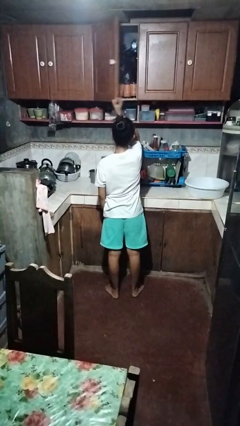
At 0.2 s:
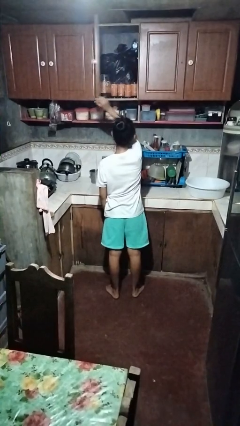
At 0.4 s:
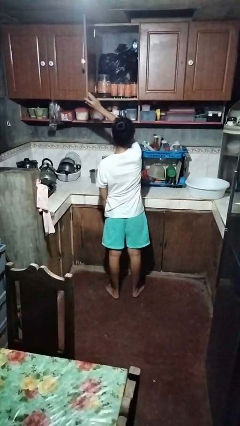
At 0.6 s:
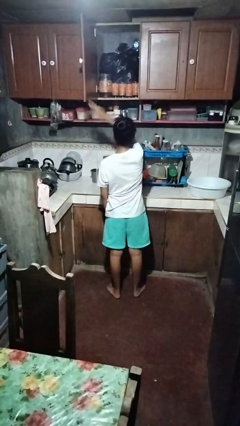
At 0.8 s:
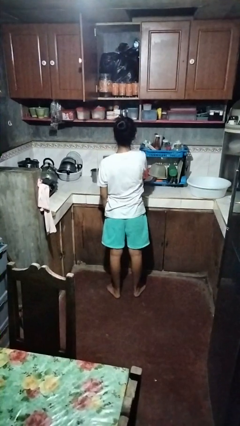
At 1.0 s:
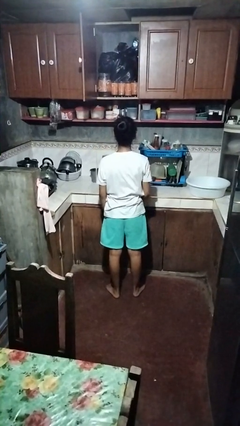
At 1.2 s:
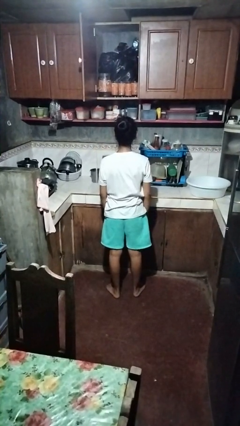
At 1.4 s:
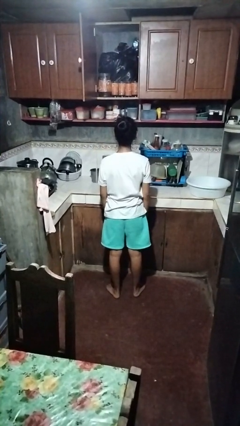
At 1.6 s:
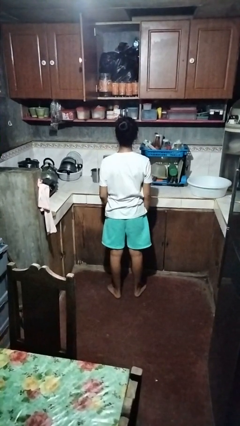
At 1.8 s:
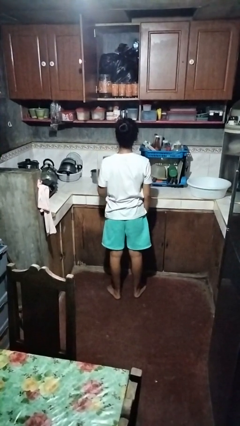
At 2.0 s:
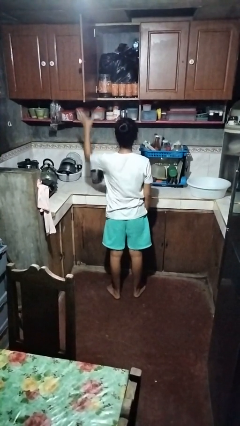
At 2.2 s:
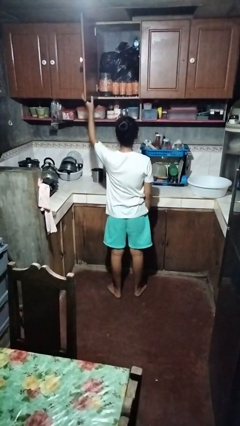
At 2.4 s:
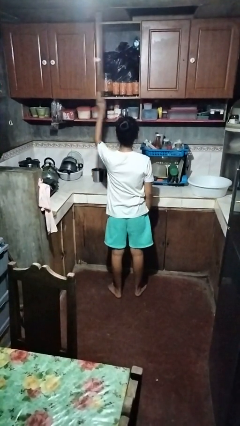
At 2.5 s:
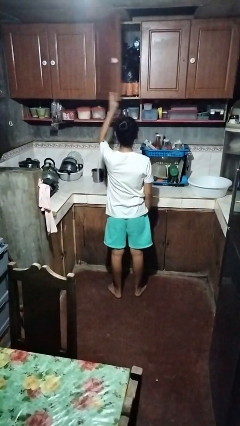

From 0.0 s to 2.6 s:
person opens cabinet

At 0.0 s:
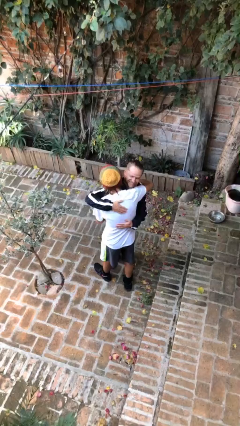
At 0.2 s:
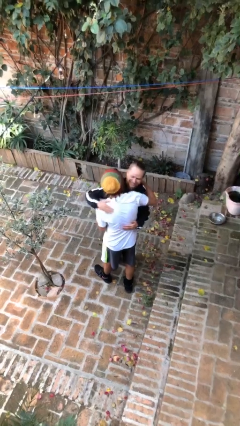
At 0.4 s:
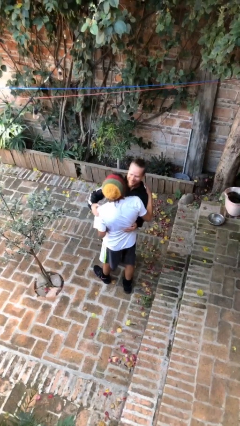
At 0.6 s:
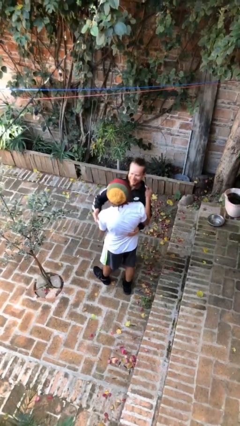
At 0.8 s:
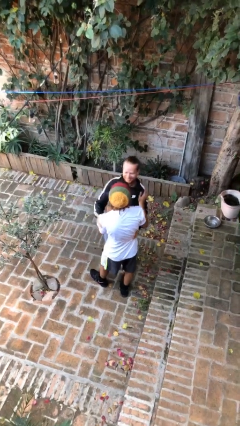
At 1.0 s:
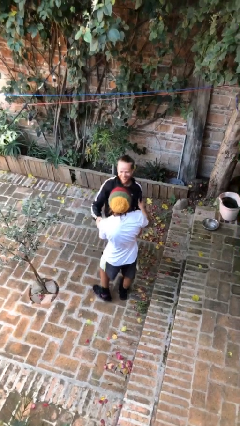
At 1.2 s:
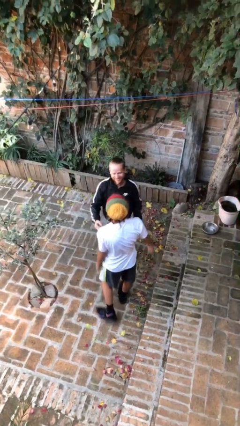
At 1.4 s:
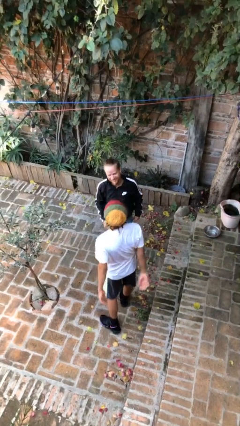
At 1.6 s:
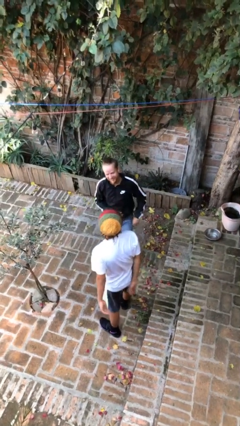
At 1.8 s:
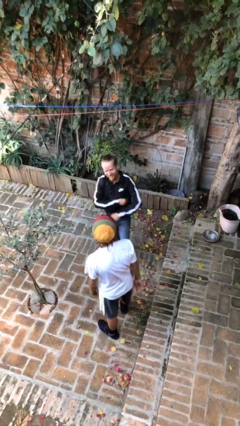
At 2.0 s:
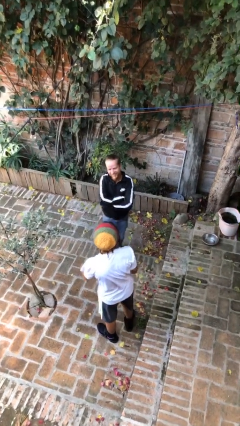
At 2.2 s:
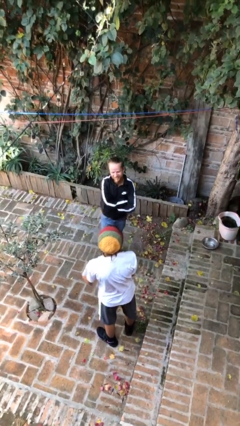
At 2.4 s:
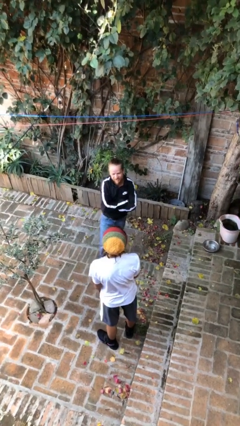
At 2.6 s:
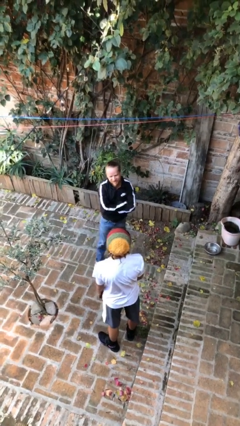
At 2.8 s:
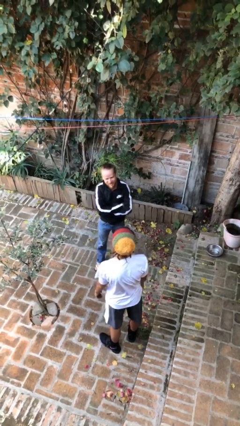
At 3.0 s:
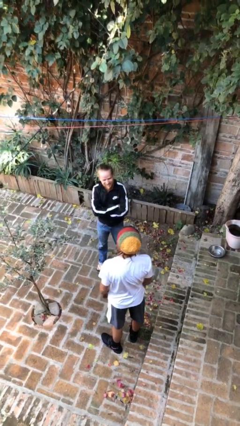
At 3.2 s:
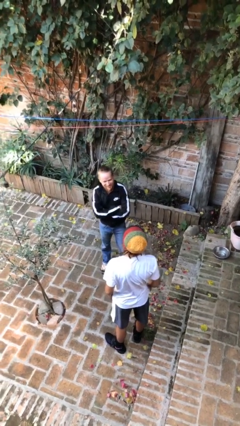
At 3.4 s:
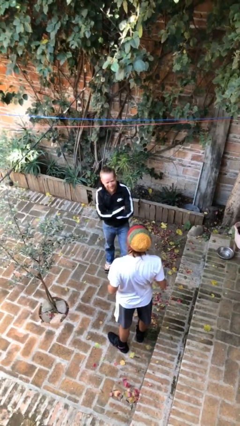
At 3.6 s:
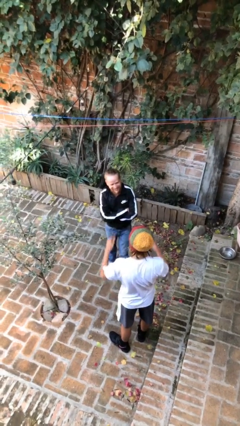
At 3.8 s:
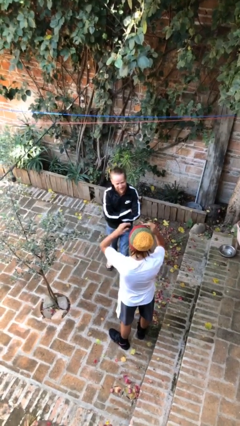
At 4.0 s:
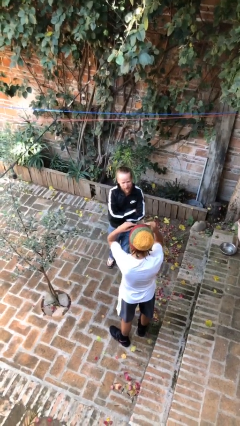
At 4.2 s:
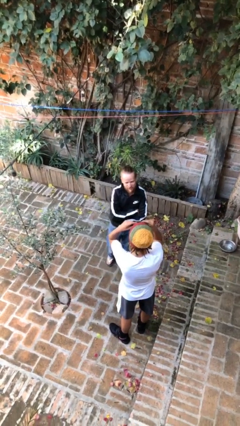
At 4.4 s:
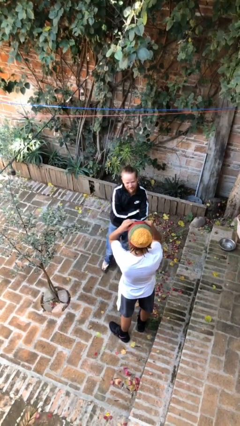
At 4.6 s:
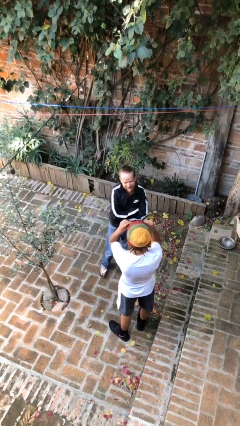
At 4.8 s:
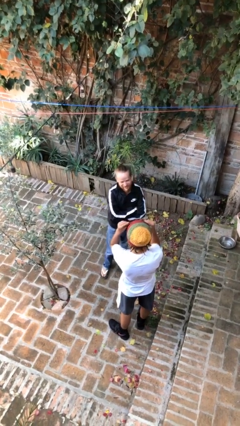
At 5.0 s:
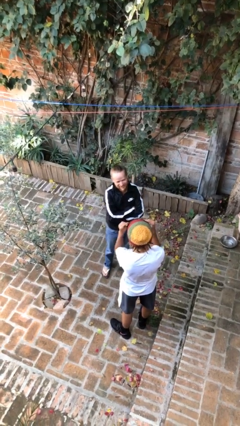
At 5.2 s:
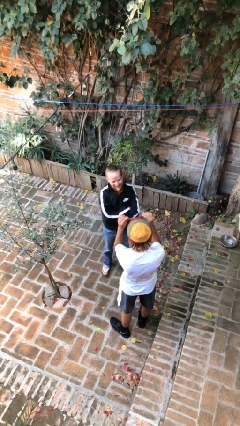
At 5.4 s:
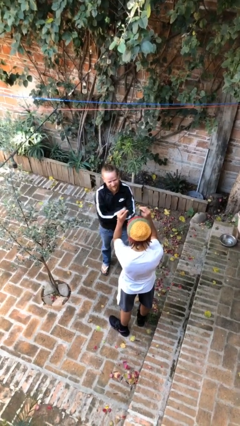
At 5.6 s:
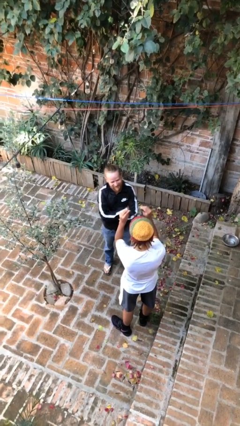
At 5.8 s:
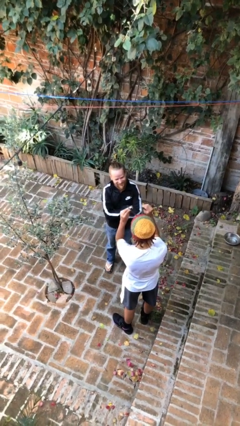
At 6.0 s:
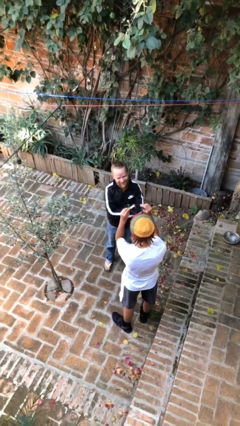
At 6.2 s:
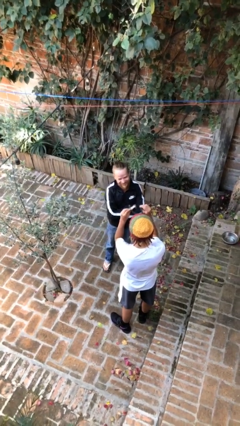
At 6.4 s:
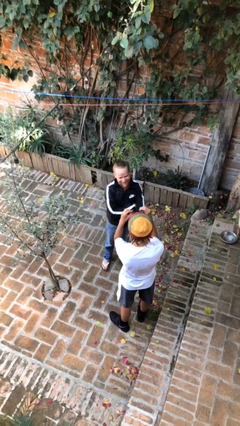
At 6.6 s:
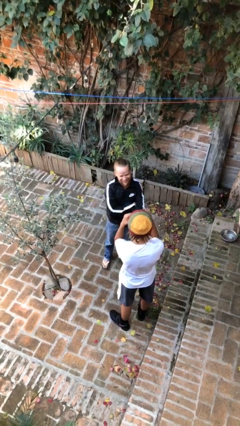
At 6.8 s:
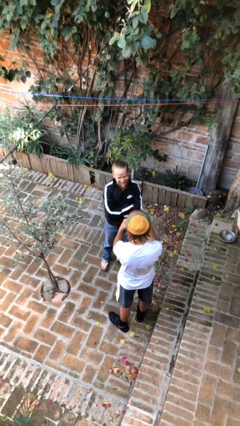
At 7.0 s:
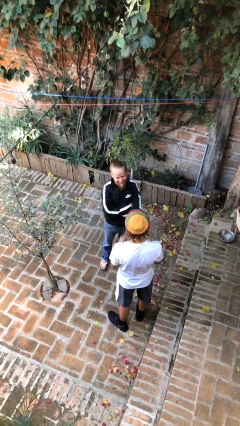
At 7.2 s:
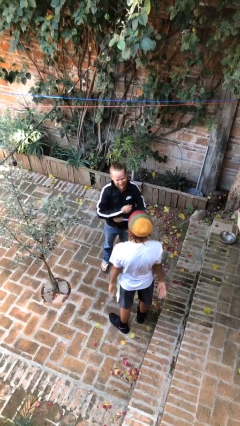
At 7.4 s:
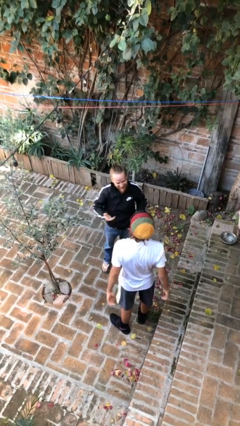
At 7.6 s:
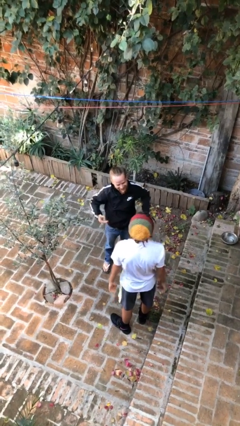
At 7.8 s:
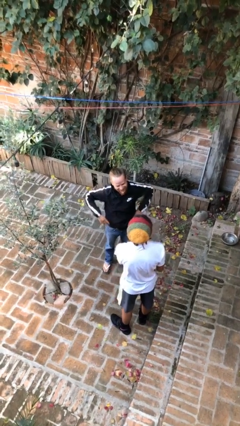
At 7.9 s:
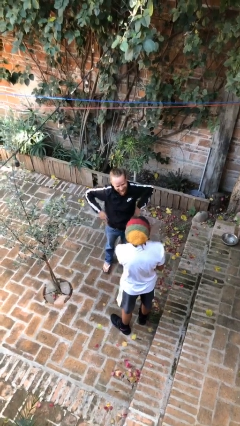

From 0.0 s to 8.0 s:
person talks to person

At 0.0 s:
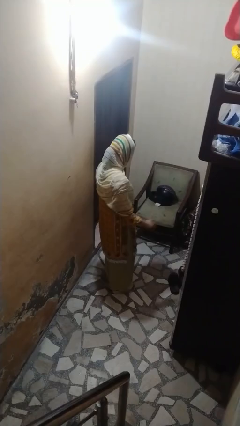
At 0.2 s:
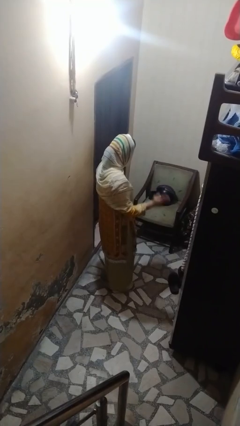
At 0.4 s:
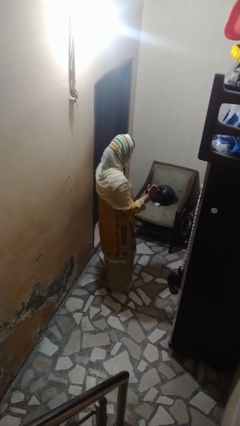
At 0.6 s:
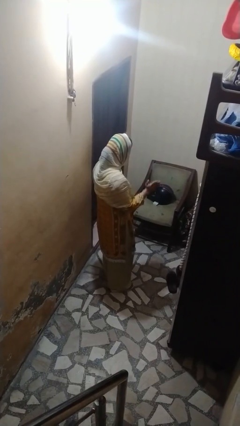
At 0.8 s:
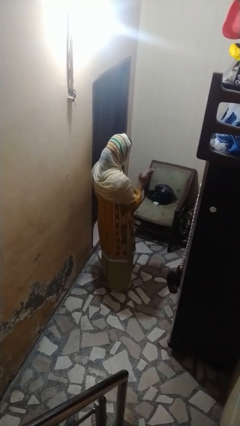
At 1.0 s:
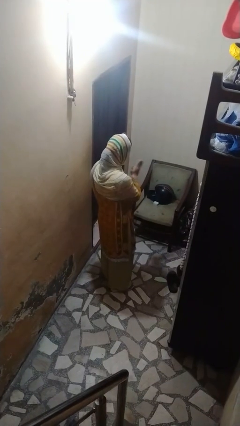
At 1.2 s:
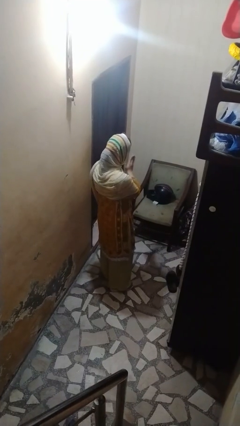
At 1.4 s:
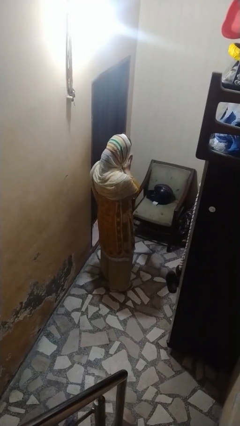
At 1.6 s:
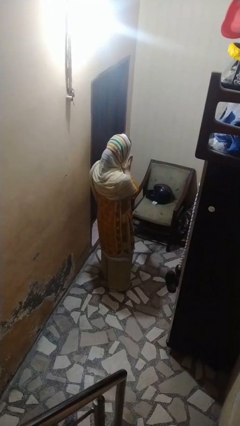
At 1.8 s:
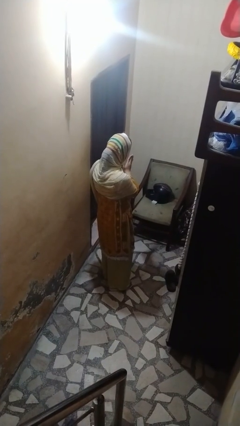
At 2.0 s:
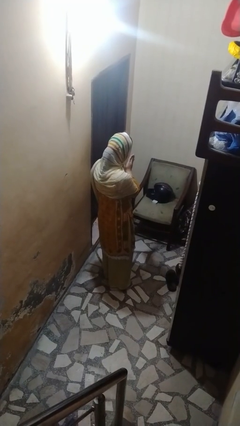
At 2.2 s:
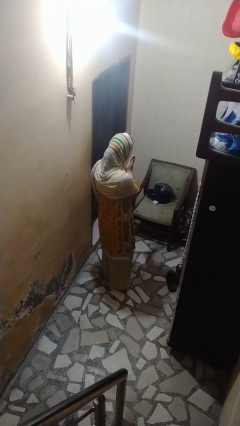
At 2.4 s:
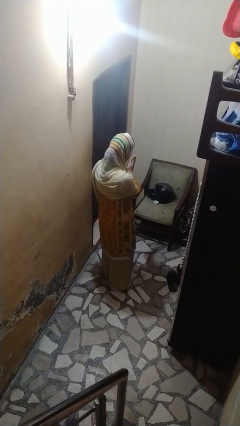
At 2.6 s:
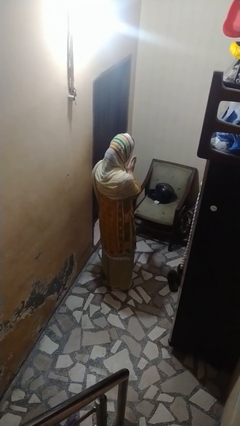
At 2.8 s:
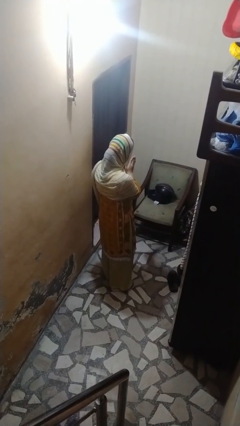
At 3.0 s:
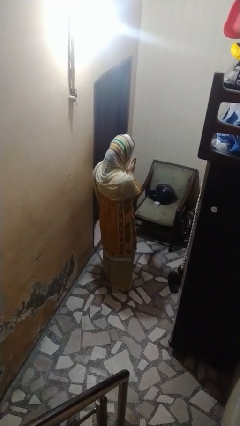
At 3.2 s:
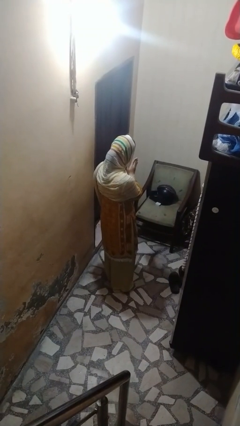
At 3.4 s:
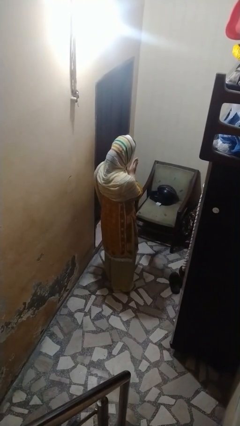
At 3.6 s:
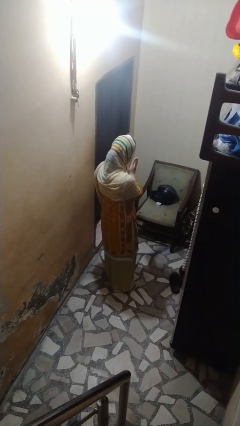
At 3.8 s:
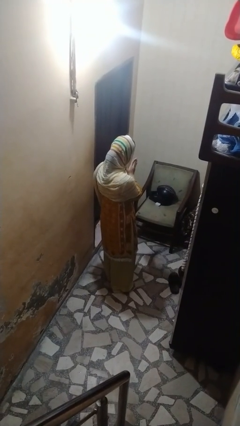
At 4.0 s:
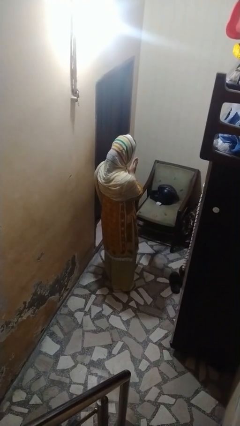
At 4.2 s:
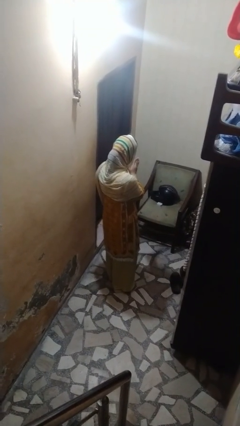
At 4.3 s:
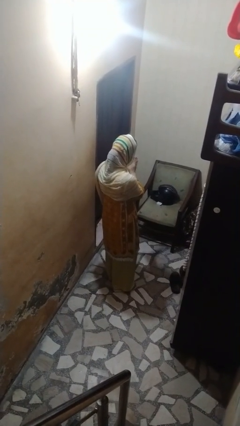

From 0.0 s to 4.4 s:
person gestures swipe left

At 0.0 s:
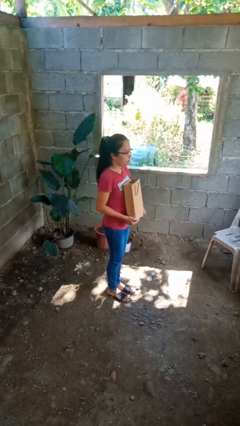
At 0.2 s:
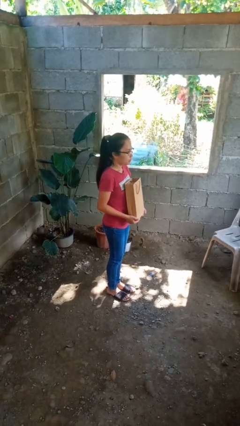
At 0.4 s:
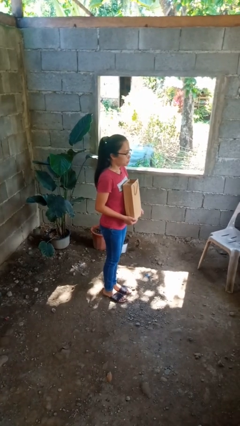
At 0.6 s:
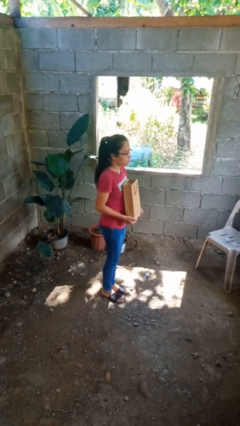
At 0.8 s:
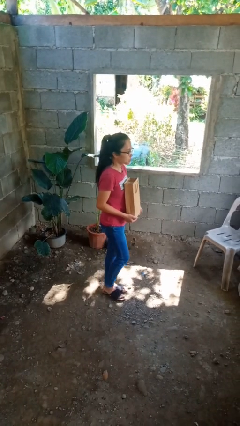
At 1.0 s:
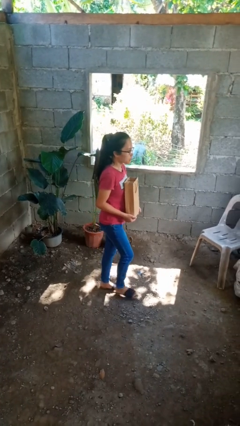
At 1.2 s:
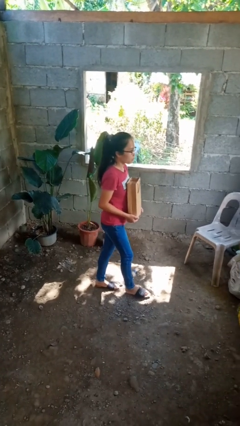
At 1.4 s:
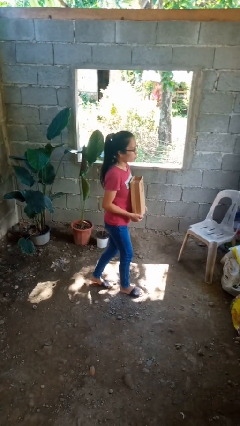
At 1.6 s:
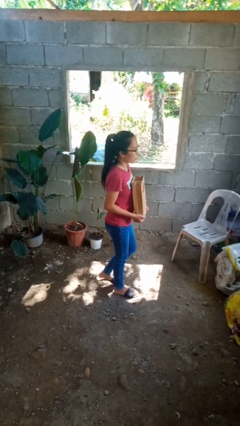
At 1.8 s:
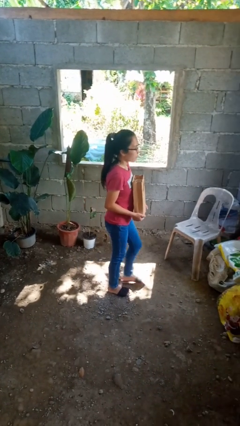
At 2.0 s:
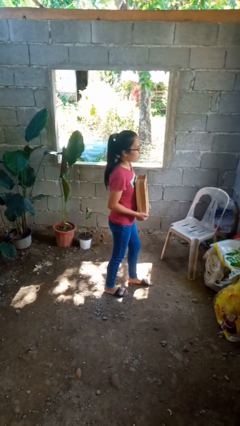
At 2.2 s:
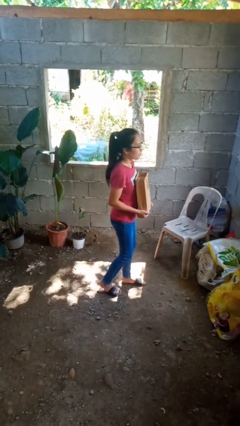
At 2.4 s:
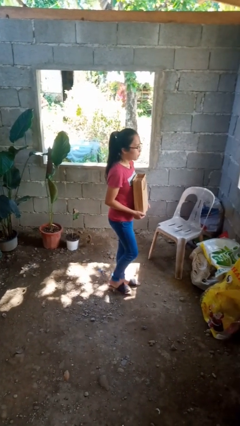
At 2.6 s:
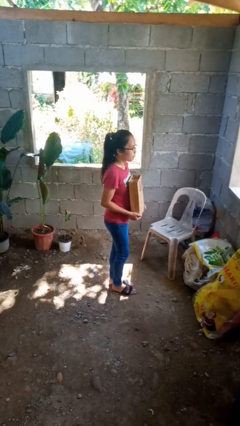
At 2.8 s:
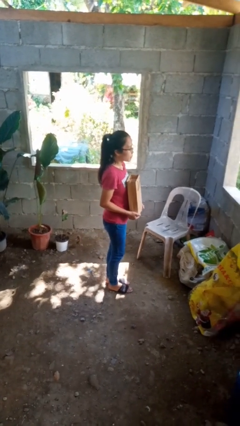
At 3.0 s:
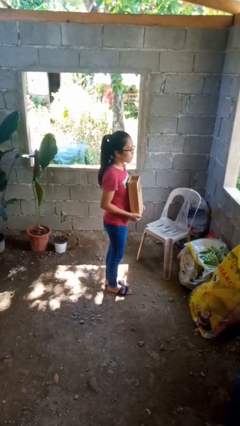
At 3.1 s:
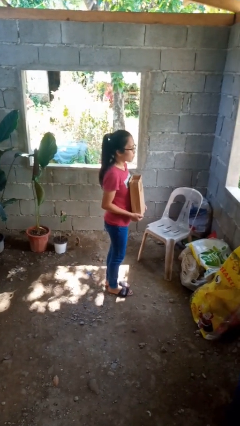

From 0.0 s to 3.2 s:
person carries groceries
